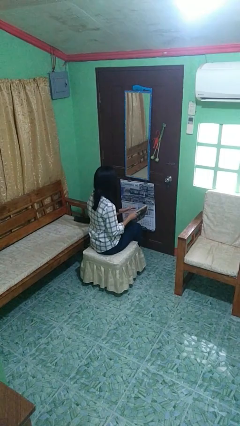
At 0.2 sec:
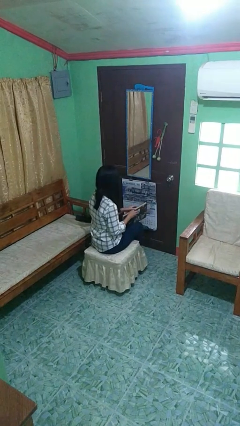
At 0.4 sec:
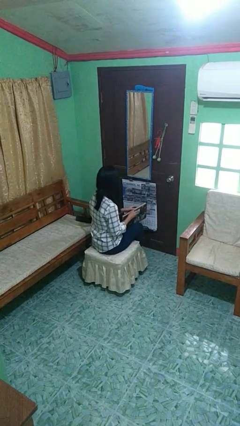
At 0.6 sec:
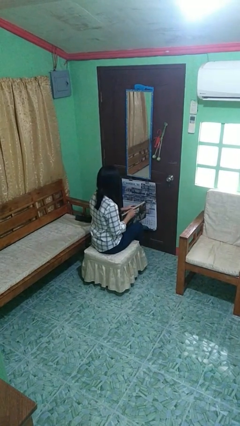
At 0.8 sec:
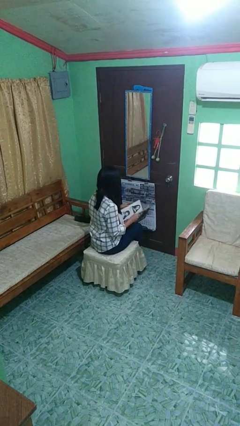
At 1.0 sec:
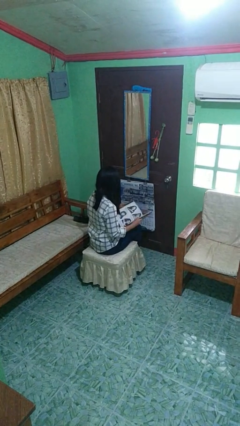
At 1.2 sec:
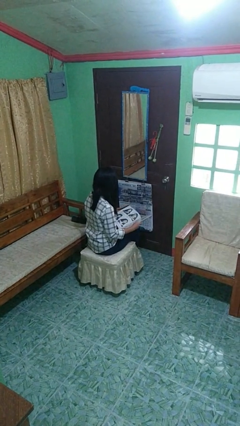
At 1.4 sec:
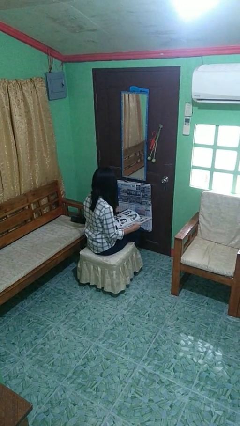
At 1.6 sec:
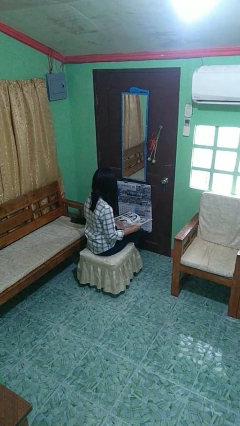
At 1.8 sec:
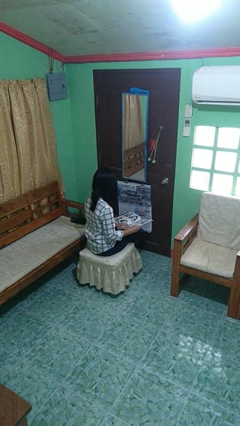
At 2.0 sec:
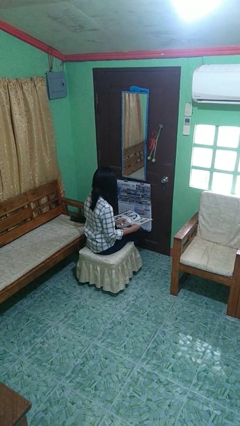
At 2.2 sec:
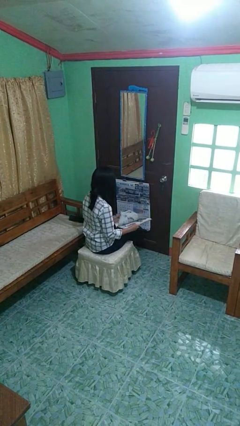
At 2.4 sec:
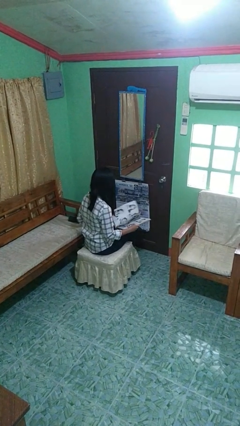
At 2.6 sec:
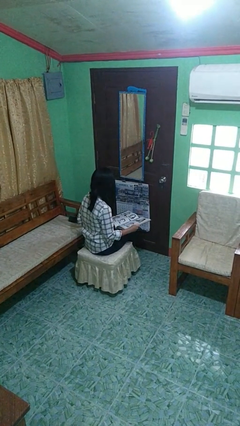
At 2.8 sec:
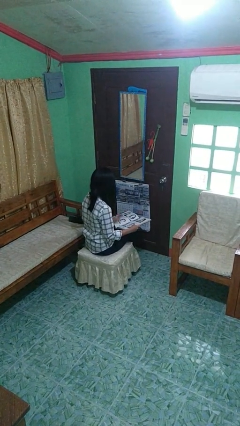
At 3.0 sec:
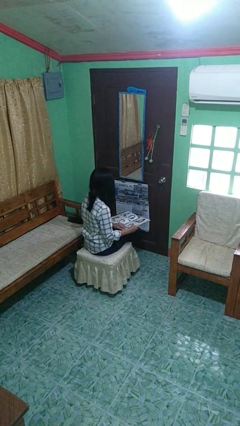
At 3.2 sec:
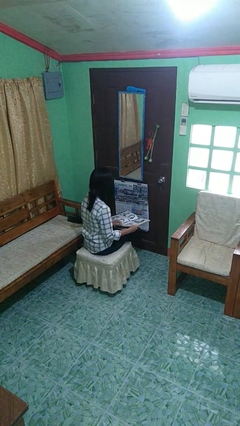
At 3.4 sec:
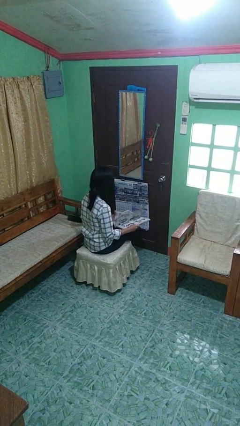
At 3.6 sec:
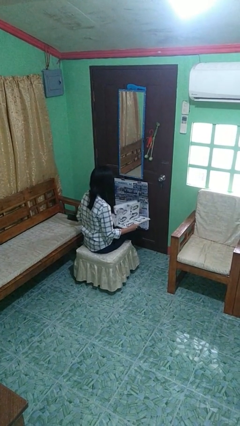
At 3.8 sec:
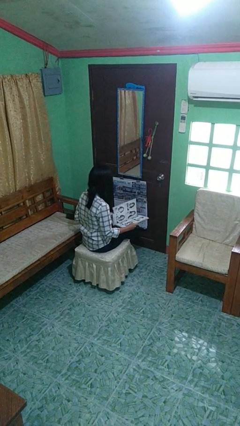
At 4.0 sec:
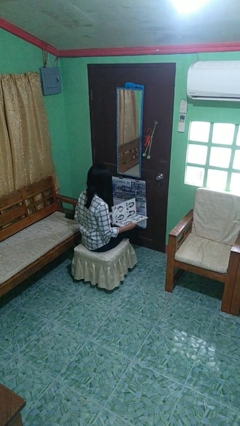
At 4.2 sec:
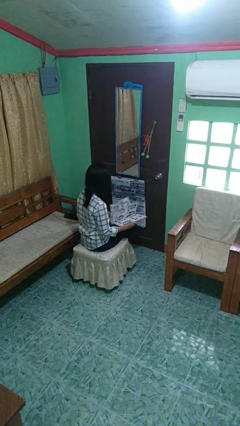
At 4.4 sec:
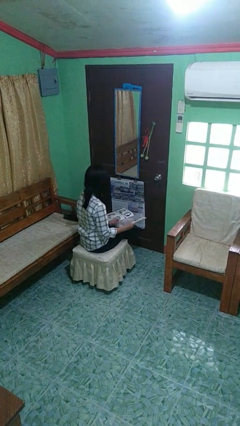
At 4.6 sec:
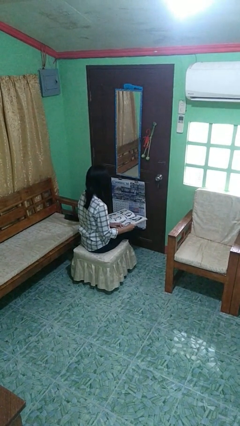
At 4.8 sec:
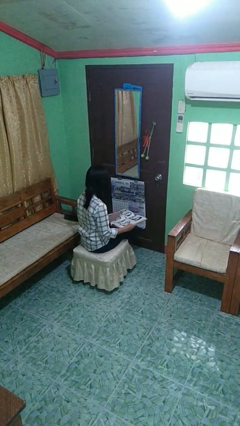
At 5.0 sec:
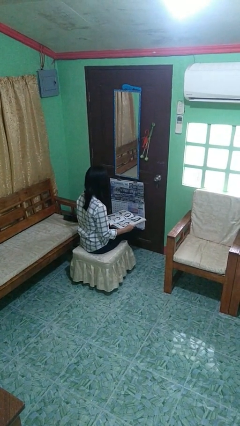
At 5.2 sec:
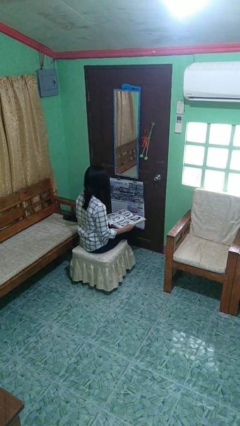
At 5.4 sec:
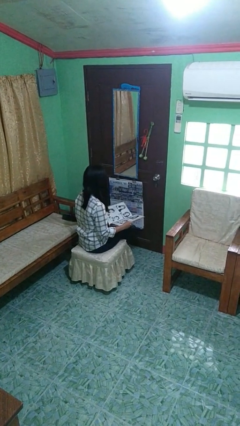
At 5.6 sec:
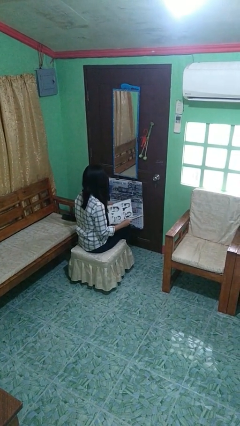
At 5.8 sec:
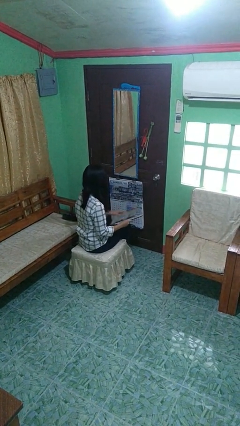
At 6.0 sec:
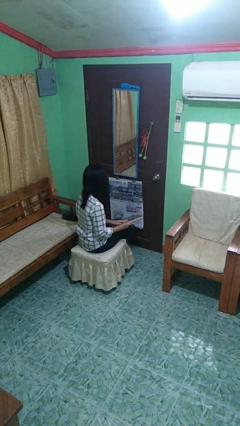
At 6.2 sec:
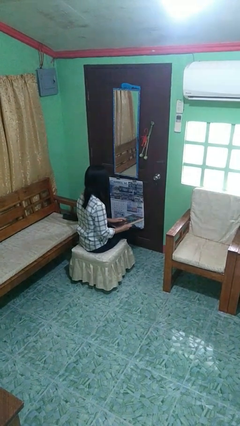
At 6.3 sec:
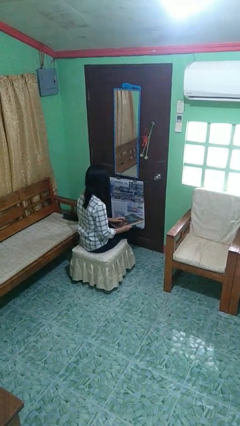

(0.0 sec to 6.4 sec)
person reads book

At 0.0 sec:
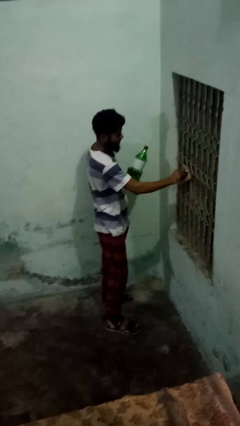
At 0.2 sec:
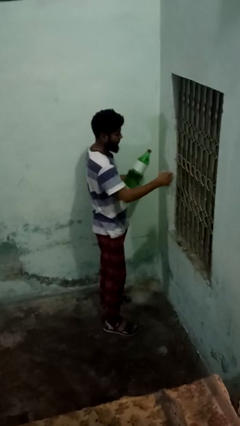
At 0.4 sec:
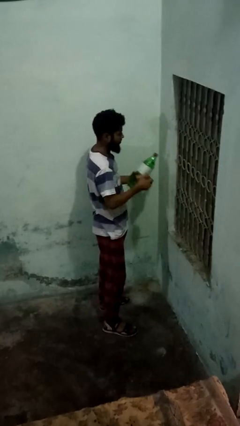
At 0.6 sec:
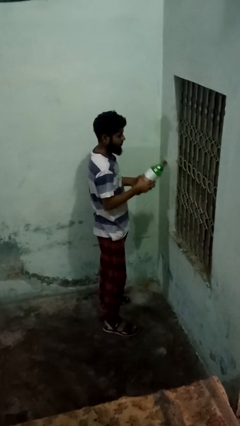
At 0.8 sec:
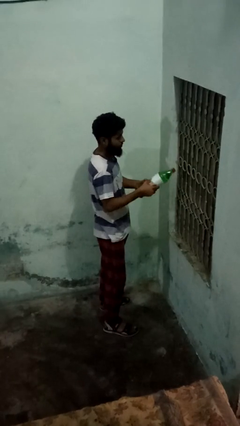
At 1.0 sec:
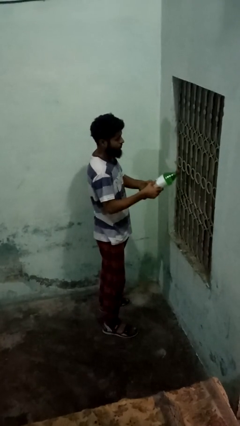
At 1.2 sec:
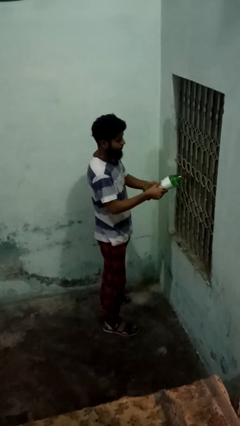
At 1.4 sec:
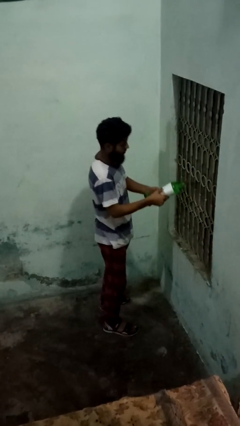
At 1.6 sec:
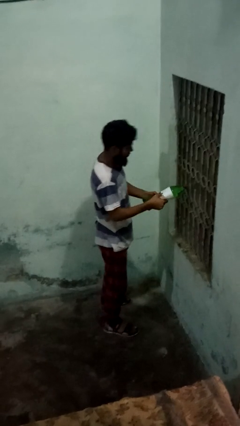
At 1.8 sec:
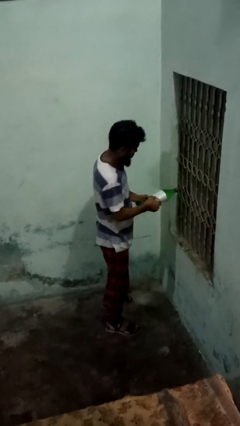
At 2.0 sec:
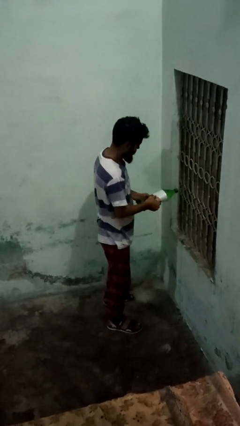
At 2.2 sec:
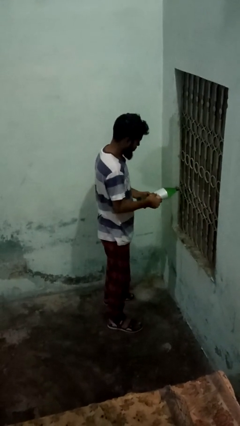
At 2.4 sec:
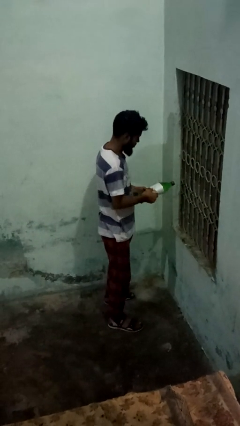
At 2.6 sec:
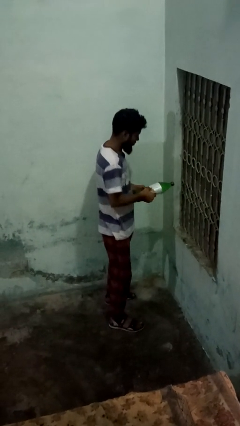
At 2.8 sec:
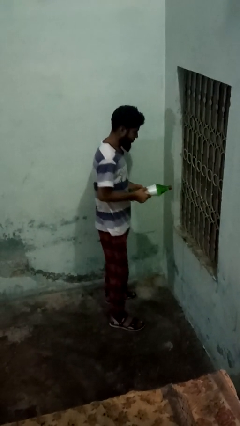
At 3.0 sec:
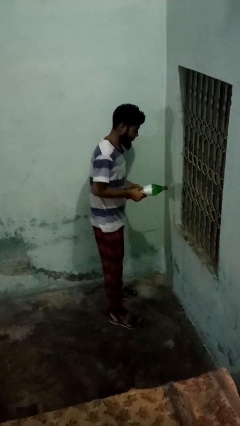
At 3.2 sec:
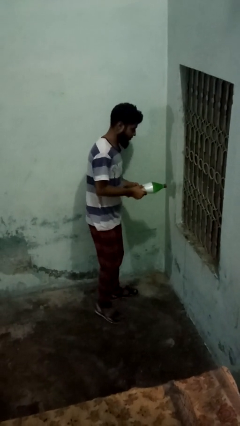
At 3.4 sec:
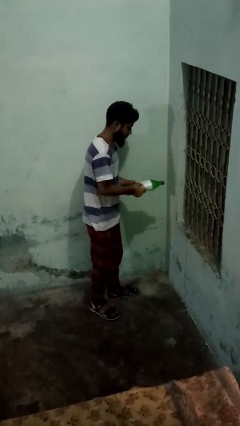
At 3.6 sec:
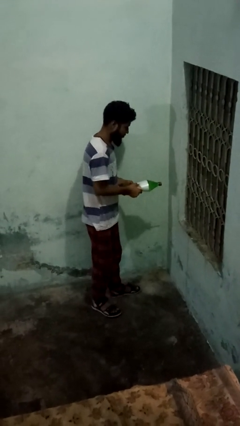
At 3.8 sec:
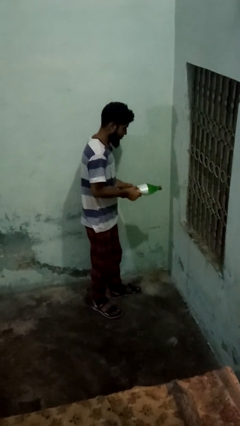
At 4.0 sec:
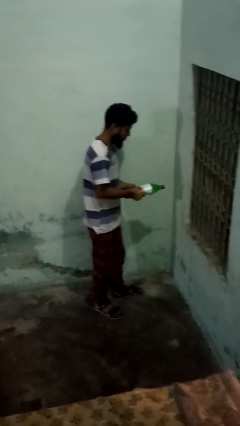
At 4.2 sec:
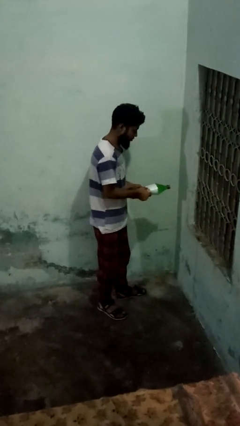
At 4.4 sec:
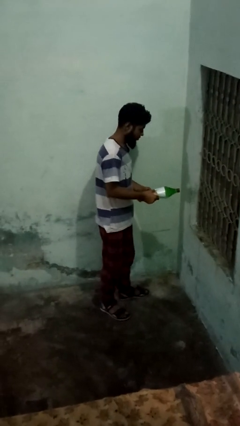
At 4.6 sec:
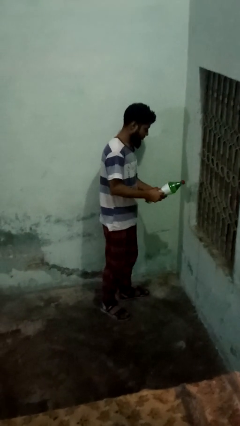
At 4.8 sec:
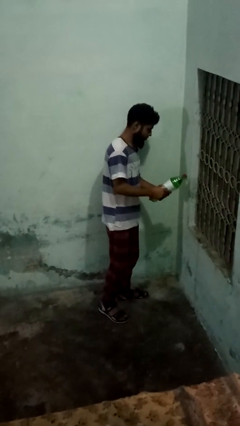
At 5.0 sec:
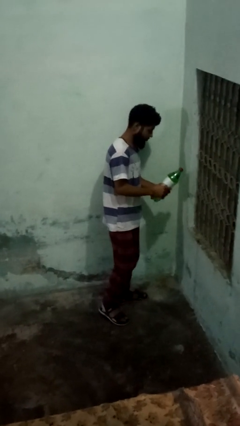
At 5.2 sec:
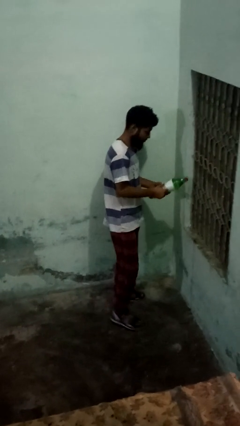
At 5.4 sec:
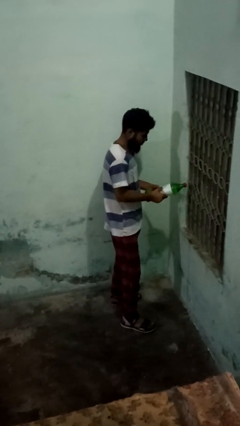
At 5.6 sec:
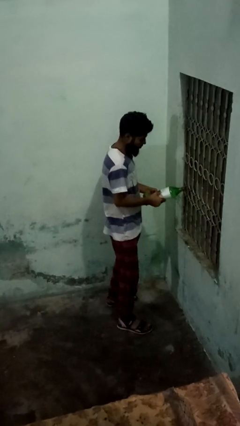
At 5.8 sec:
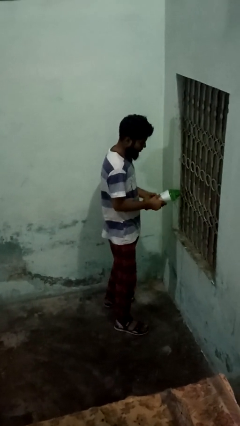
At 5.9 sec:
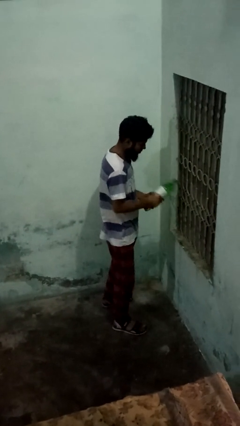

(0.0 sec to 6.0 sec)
person sprays from bottle

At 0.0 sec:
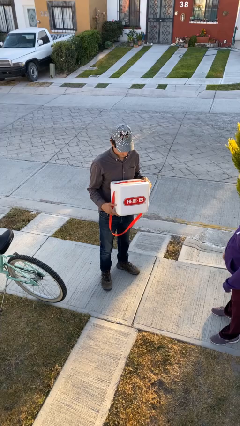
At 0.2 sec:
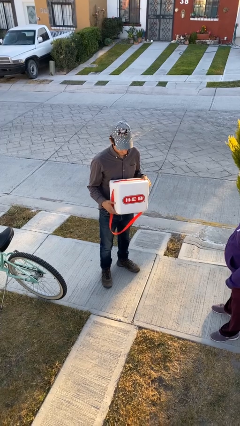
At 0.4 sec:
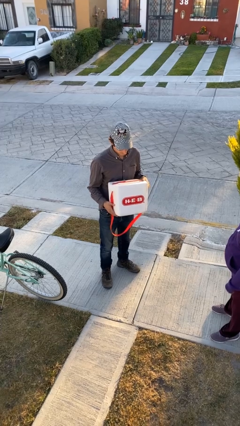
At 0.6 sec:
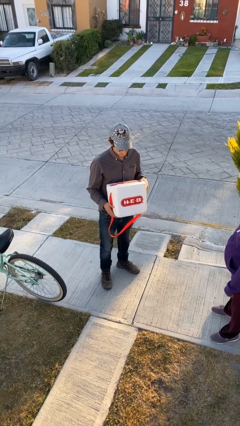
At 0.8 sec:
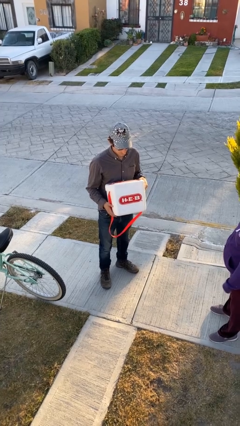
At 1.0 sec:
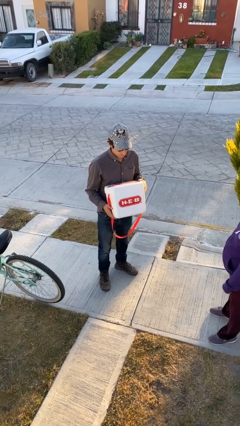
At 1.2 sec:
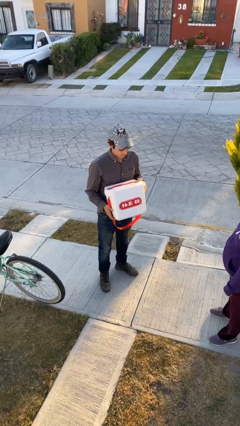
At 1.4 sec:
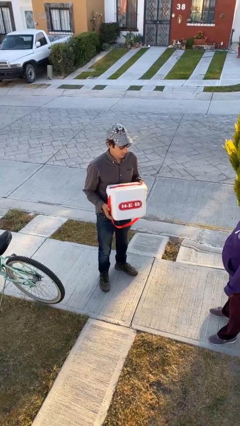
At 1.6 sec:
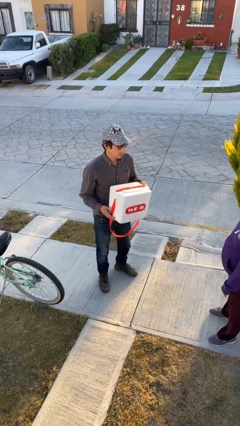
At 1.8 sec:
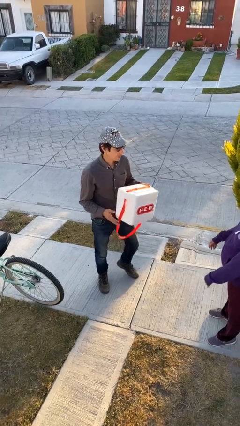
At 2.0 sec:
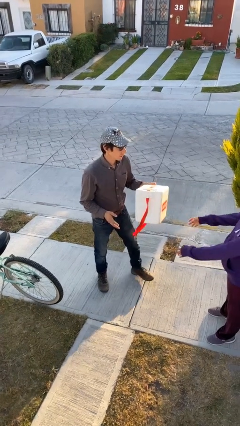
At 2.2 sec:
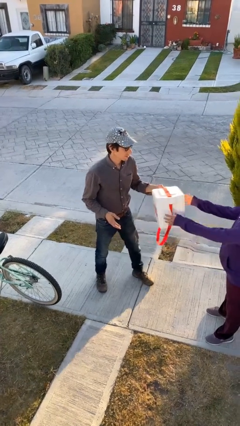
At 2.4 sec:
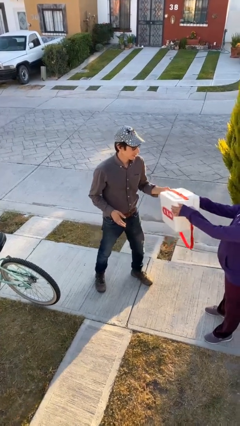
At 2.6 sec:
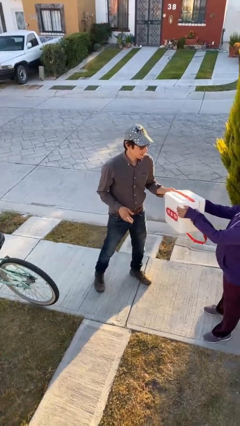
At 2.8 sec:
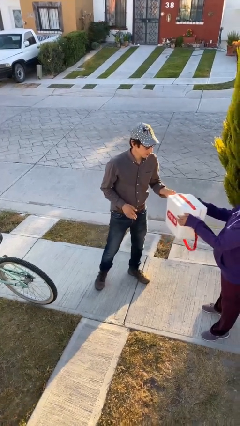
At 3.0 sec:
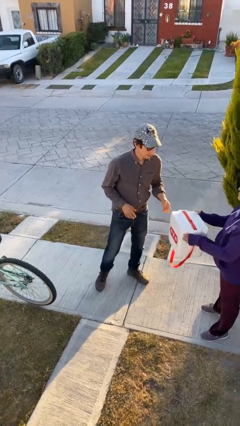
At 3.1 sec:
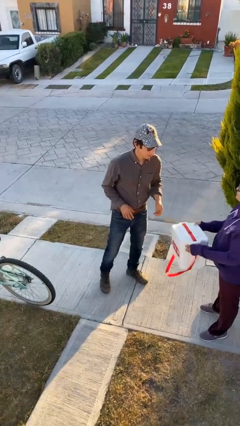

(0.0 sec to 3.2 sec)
person transfers object to person

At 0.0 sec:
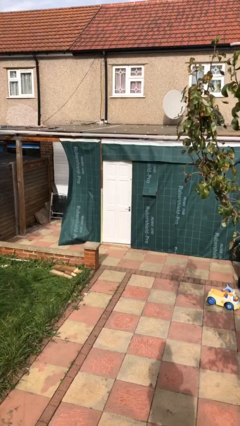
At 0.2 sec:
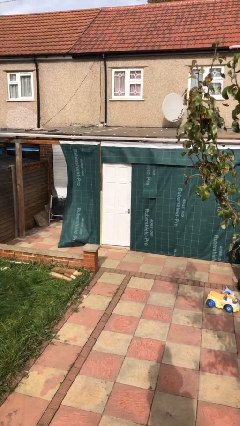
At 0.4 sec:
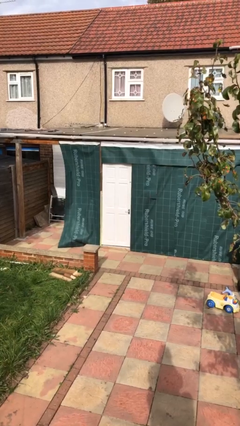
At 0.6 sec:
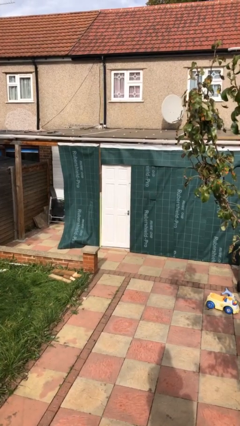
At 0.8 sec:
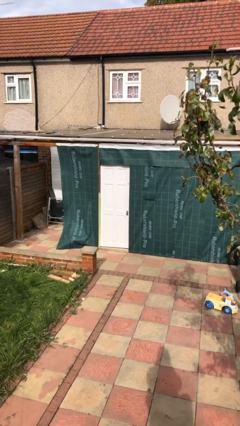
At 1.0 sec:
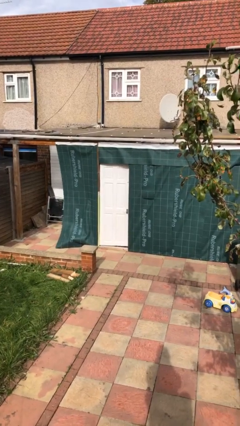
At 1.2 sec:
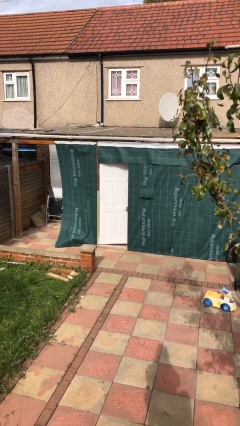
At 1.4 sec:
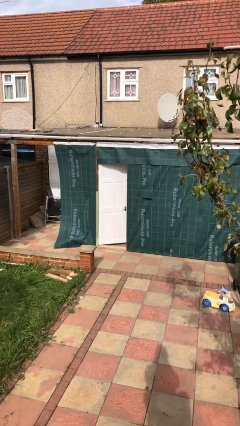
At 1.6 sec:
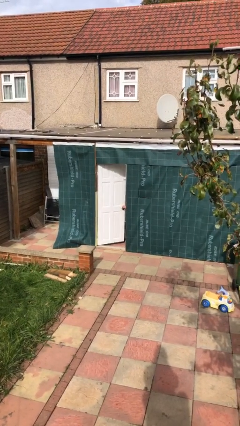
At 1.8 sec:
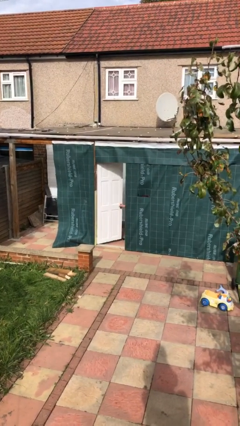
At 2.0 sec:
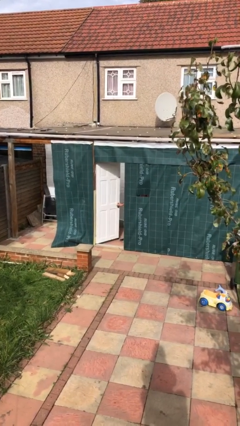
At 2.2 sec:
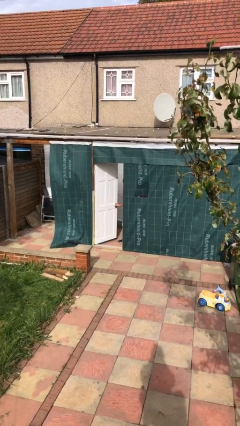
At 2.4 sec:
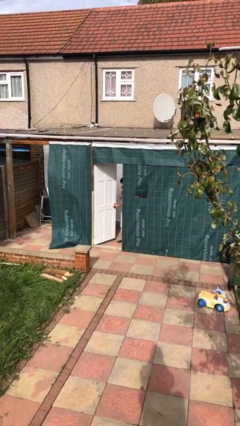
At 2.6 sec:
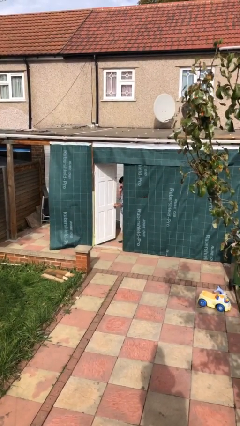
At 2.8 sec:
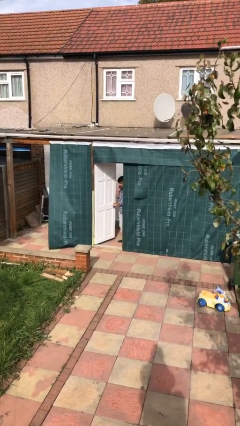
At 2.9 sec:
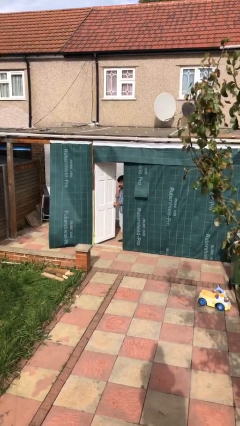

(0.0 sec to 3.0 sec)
person opens facility door
